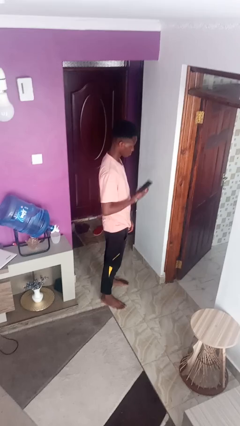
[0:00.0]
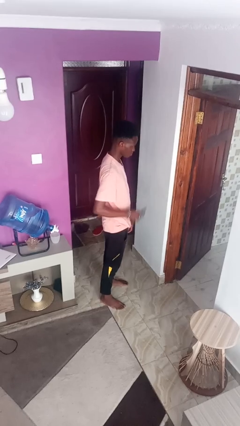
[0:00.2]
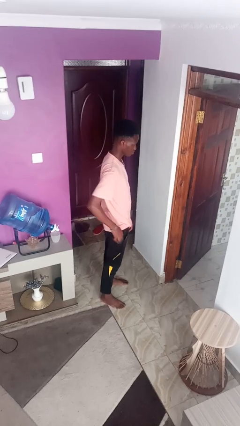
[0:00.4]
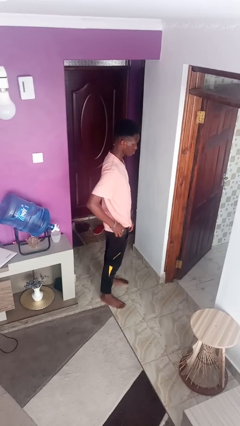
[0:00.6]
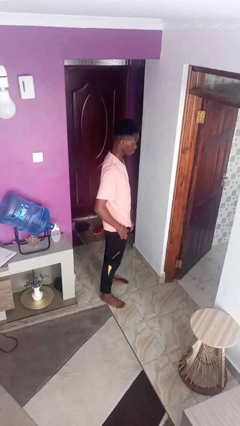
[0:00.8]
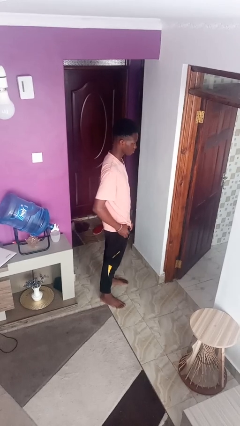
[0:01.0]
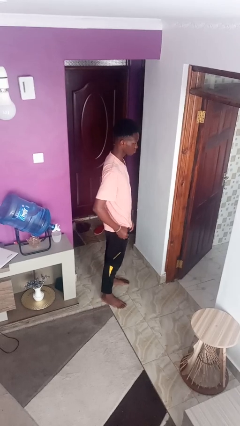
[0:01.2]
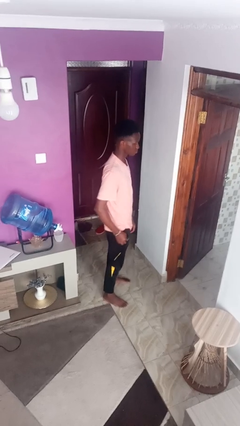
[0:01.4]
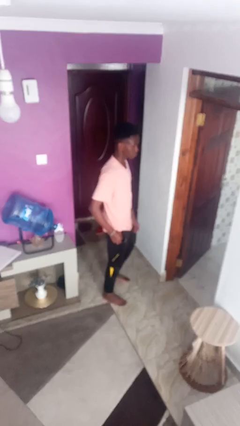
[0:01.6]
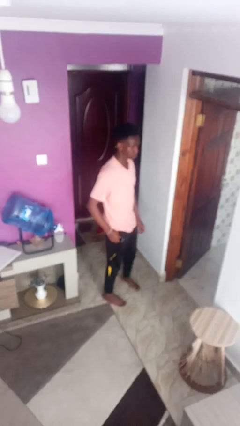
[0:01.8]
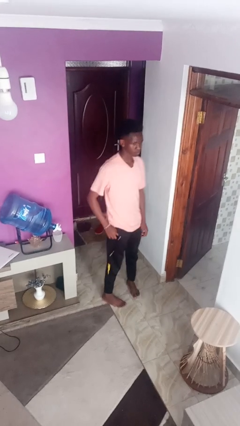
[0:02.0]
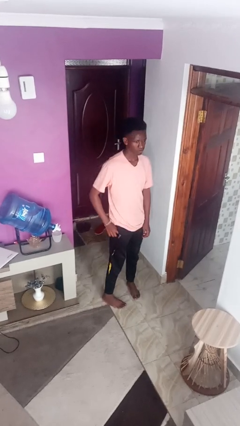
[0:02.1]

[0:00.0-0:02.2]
person puts phone into pocket

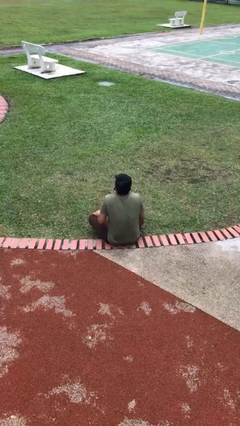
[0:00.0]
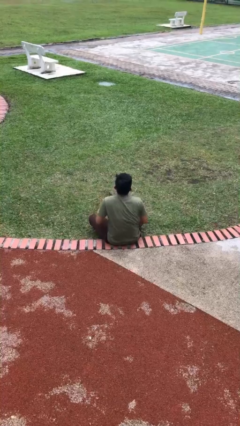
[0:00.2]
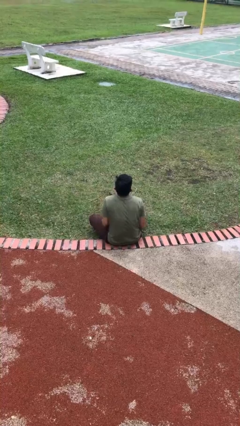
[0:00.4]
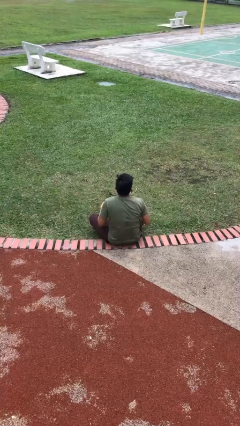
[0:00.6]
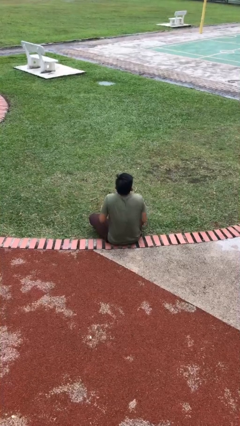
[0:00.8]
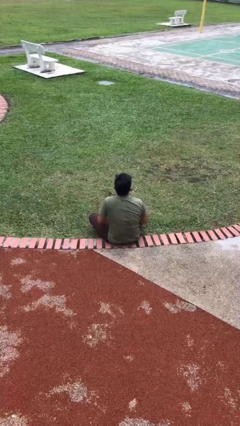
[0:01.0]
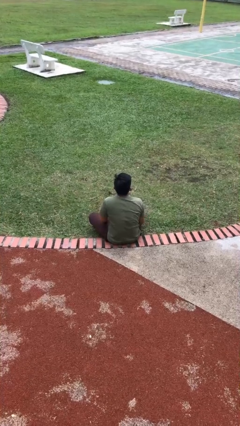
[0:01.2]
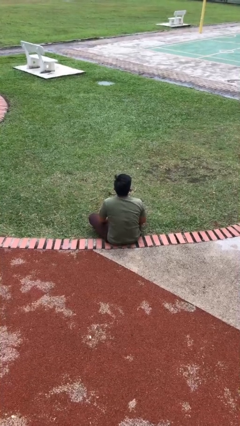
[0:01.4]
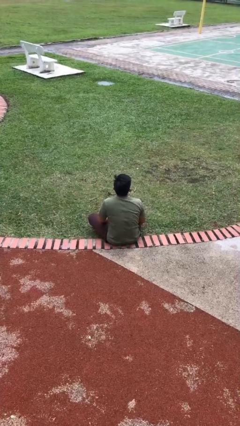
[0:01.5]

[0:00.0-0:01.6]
person shrugs

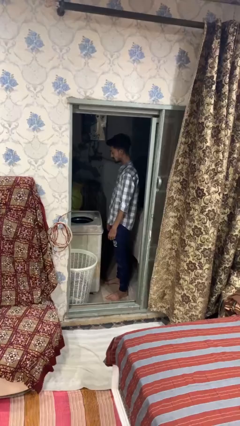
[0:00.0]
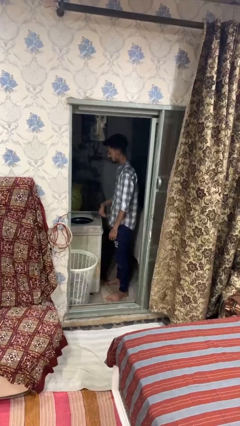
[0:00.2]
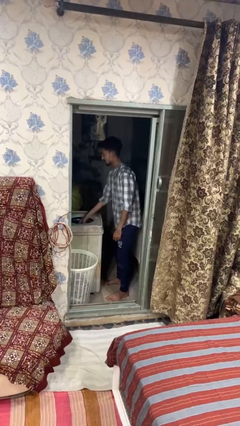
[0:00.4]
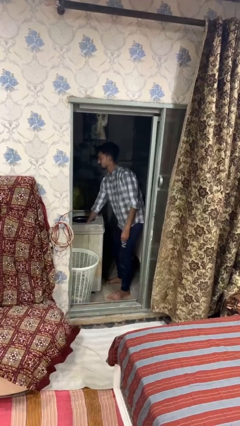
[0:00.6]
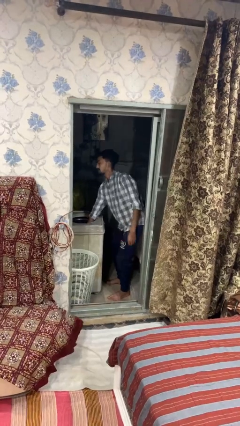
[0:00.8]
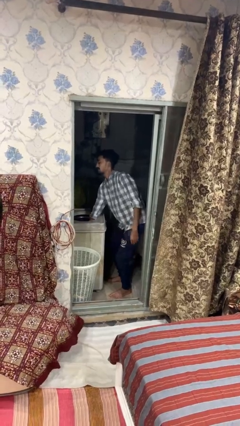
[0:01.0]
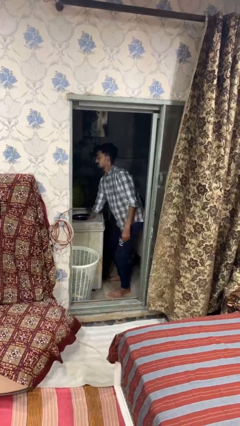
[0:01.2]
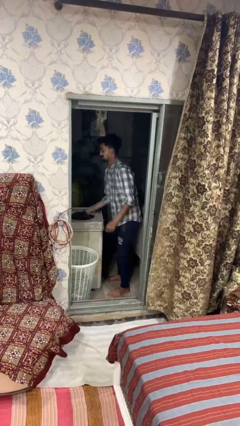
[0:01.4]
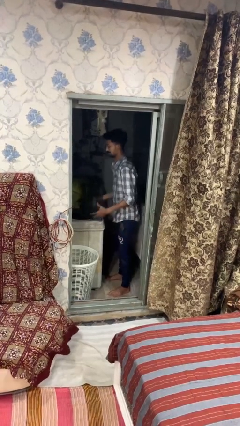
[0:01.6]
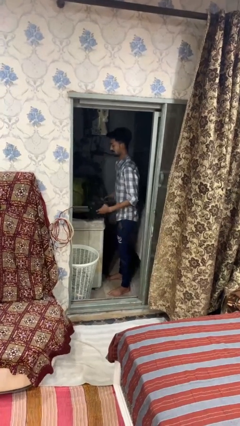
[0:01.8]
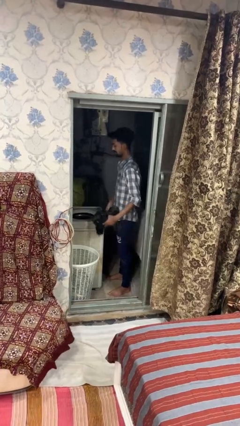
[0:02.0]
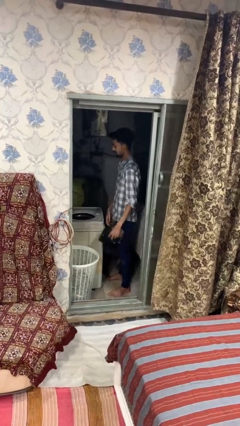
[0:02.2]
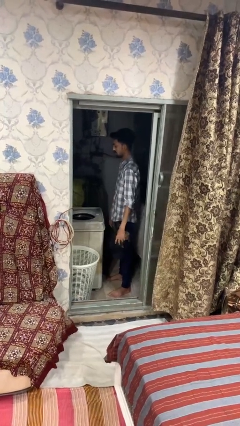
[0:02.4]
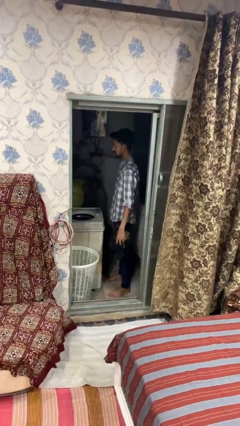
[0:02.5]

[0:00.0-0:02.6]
person unloads dryer

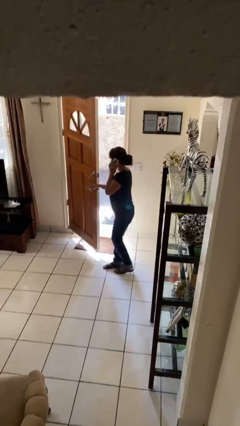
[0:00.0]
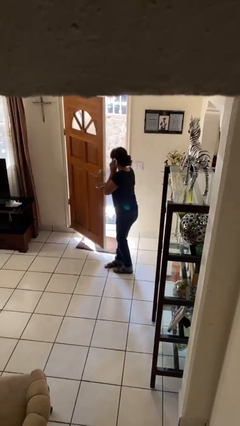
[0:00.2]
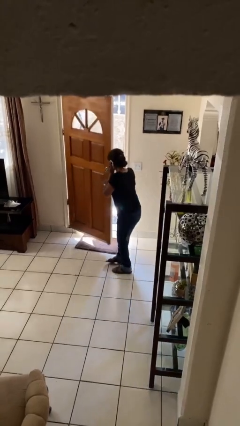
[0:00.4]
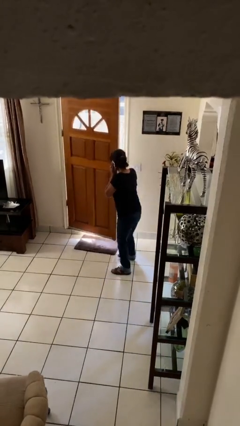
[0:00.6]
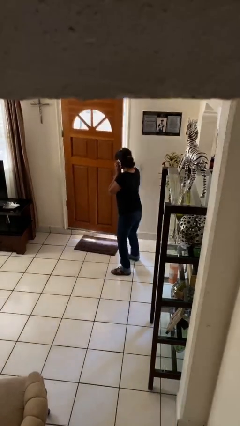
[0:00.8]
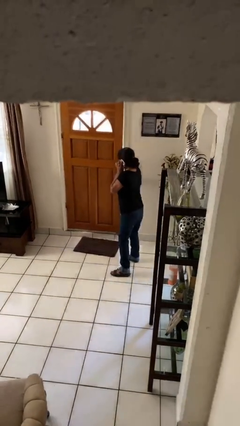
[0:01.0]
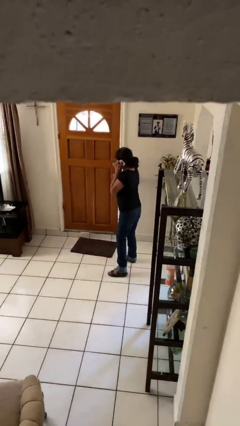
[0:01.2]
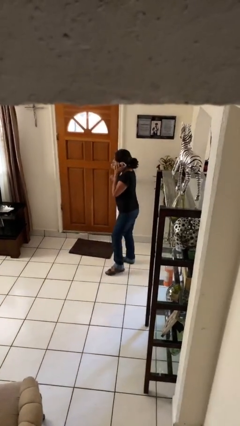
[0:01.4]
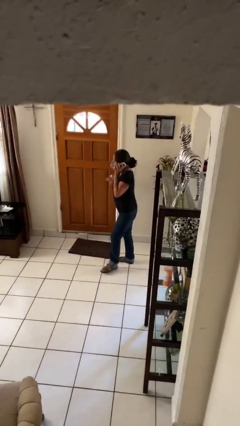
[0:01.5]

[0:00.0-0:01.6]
person closes facility door

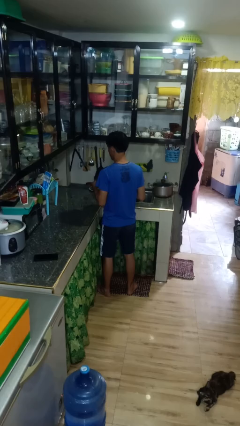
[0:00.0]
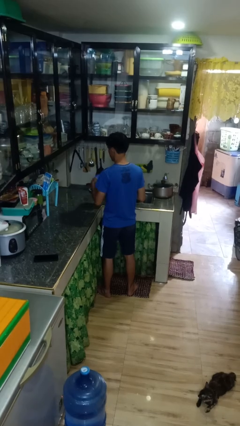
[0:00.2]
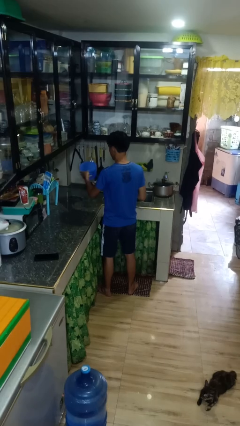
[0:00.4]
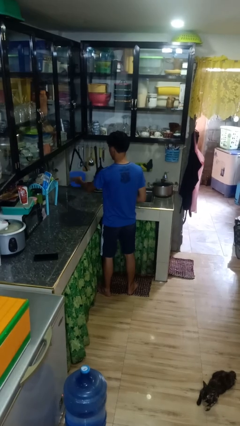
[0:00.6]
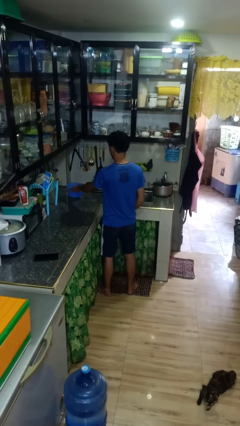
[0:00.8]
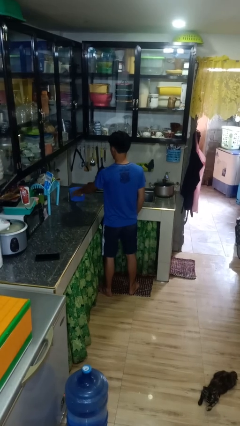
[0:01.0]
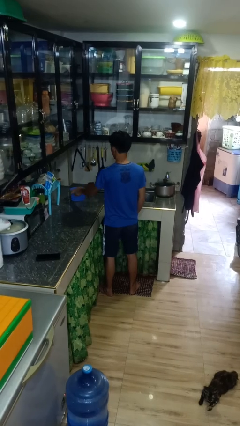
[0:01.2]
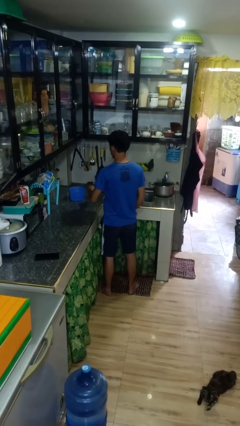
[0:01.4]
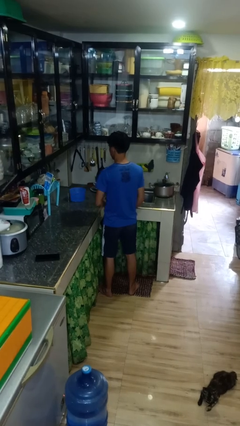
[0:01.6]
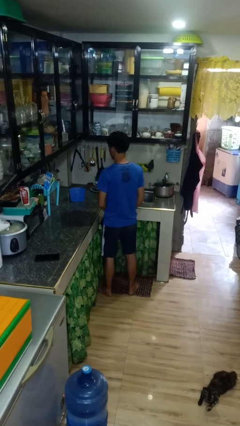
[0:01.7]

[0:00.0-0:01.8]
person puts down object on countertop

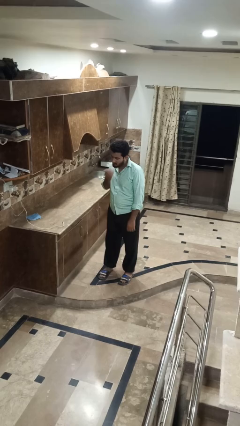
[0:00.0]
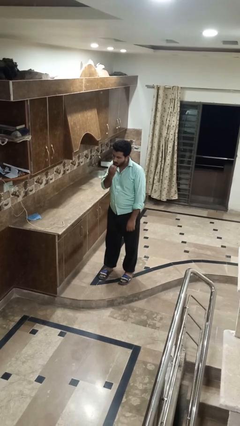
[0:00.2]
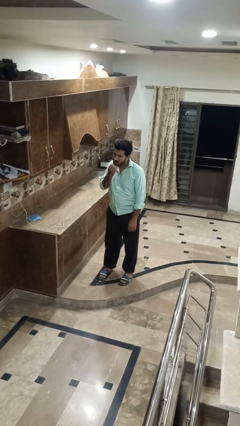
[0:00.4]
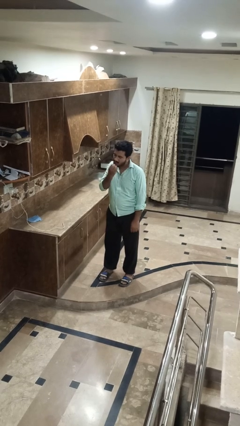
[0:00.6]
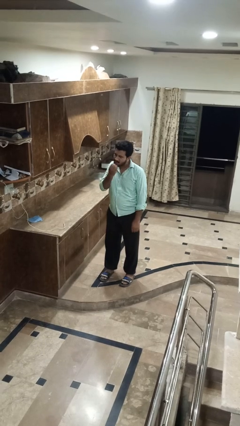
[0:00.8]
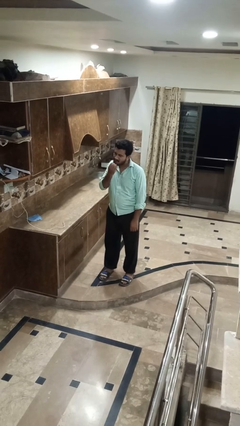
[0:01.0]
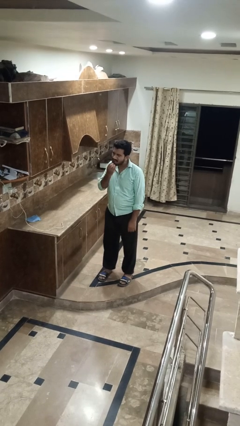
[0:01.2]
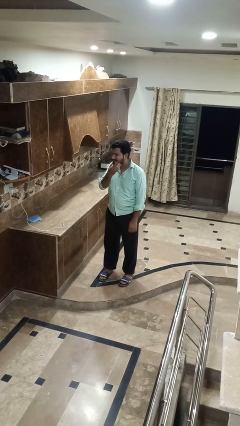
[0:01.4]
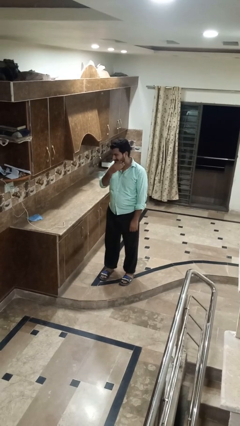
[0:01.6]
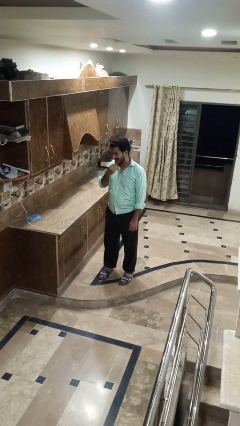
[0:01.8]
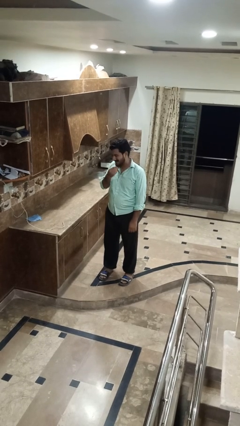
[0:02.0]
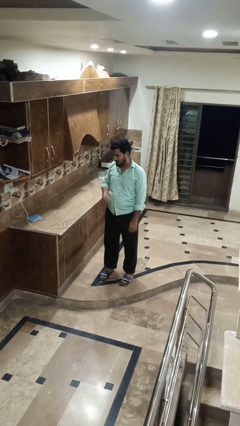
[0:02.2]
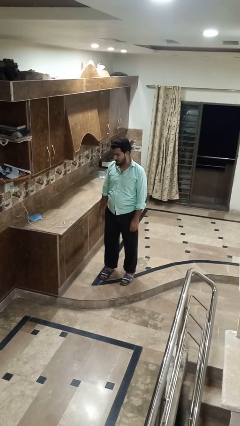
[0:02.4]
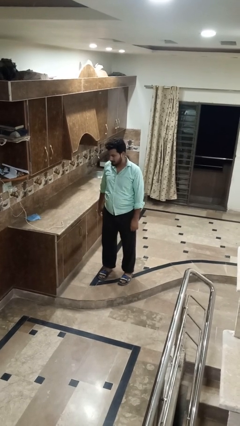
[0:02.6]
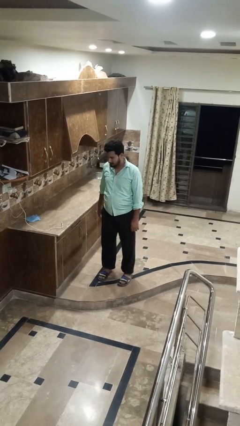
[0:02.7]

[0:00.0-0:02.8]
person strokes chin

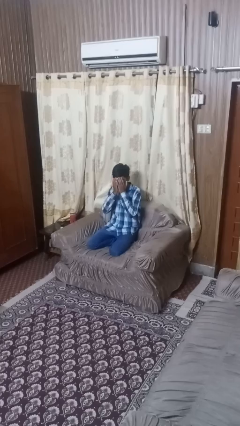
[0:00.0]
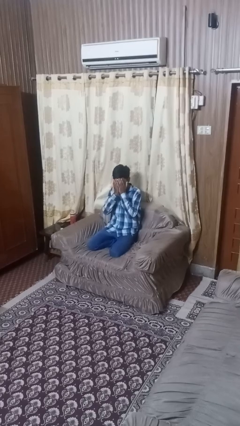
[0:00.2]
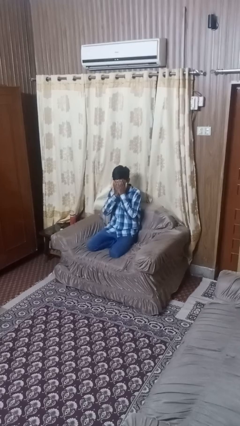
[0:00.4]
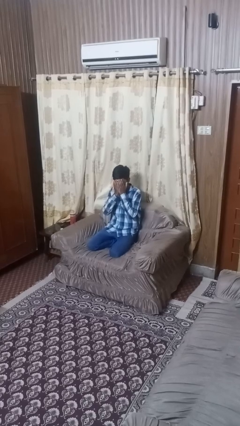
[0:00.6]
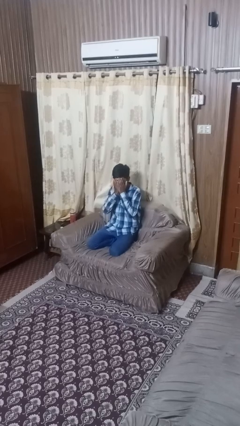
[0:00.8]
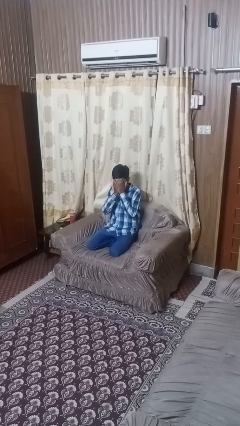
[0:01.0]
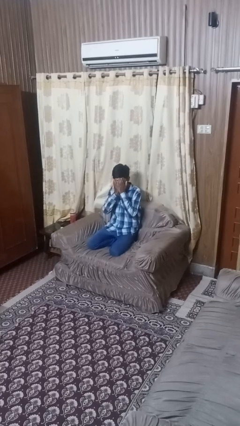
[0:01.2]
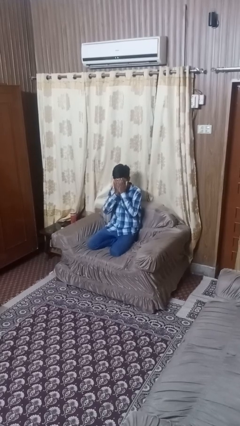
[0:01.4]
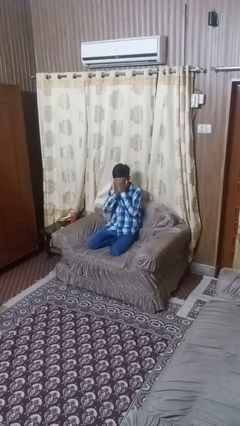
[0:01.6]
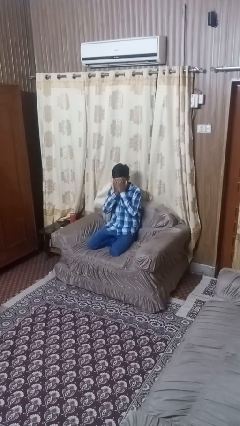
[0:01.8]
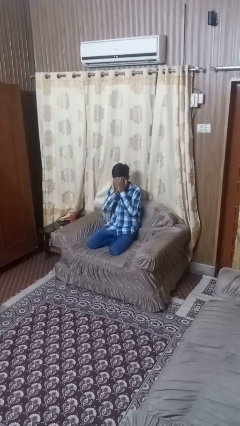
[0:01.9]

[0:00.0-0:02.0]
person covers face with hands

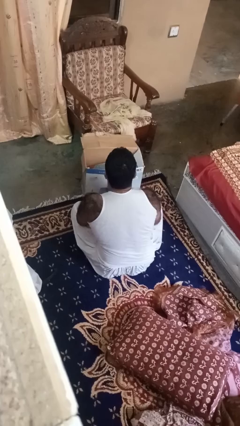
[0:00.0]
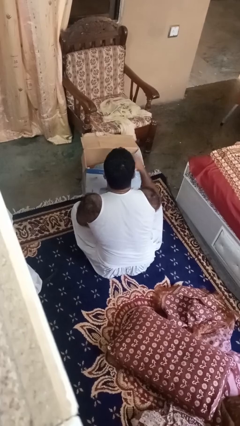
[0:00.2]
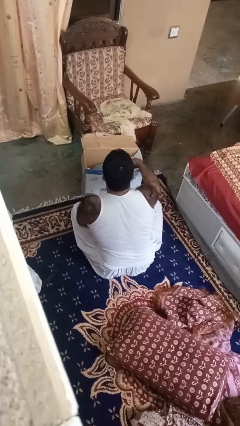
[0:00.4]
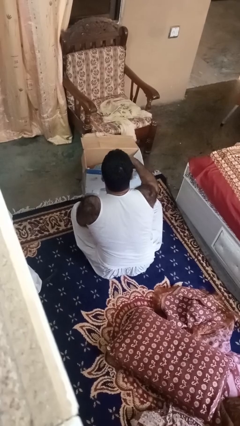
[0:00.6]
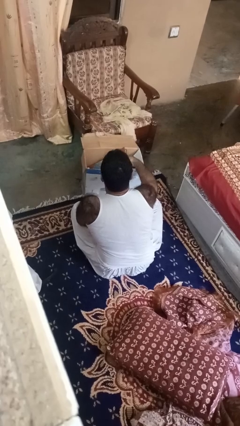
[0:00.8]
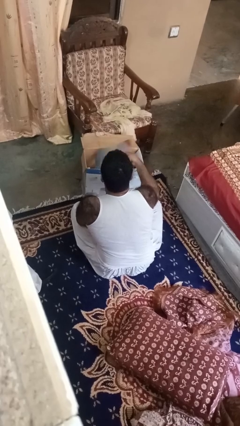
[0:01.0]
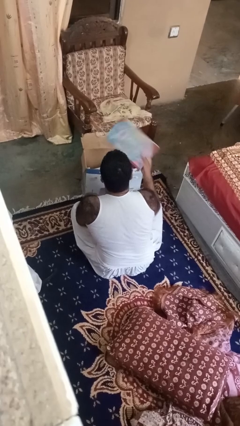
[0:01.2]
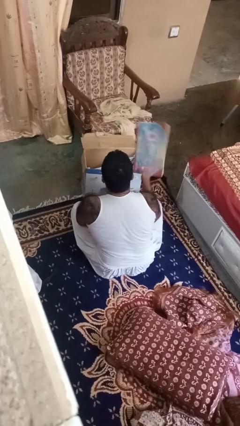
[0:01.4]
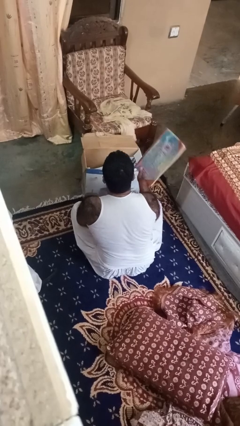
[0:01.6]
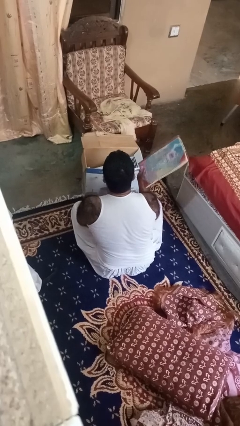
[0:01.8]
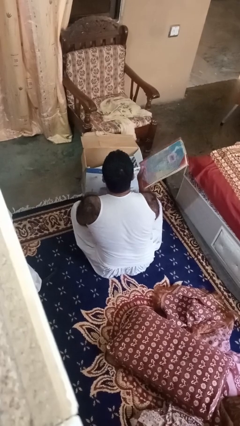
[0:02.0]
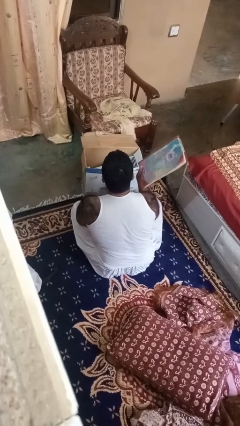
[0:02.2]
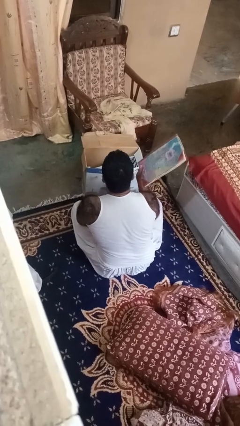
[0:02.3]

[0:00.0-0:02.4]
person takes object from box
